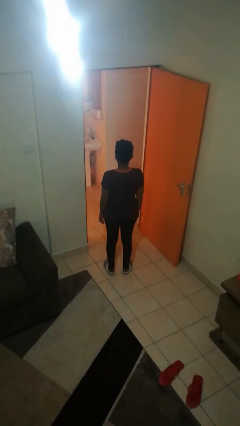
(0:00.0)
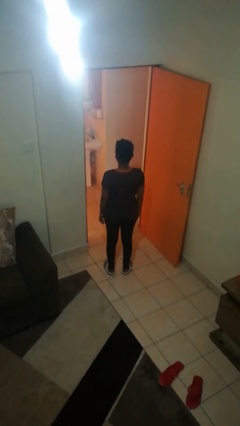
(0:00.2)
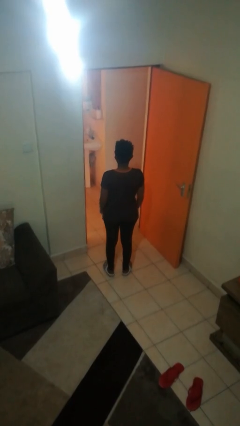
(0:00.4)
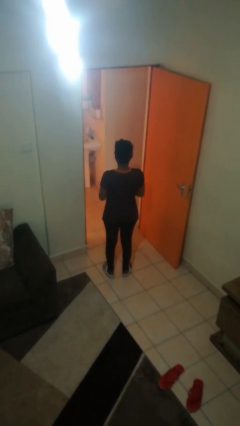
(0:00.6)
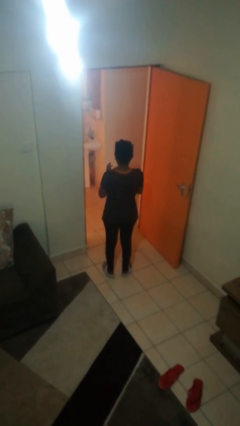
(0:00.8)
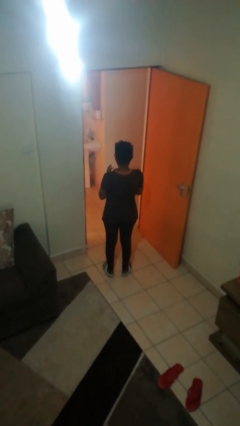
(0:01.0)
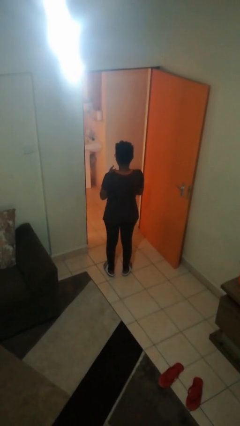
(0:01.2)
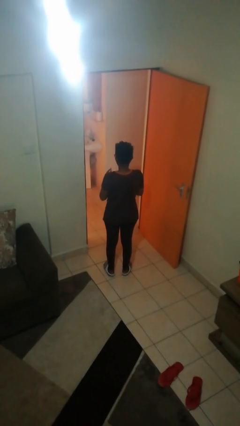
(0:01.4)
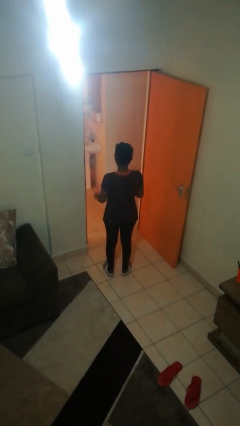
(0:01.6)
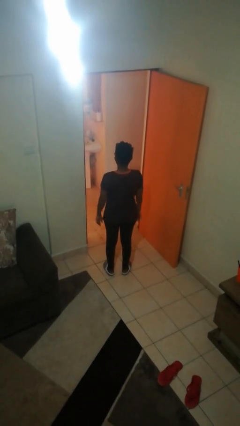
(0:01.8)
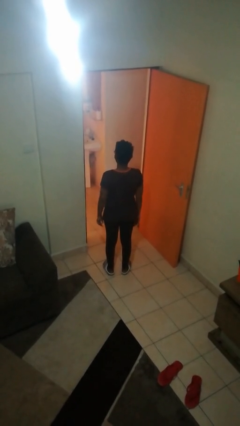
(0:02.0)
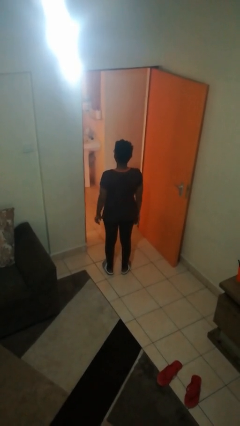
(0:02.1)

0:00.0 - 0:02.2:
person puts on ring

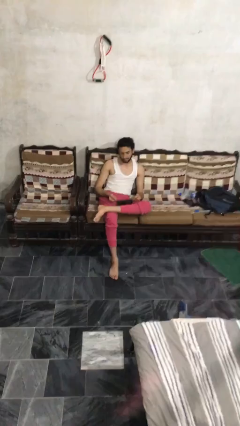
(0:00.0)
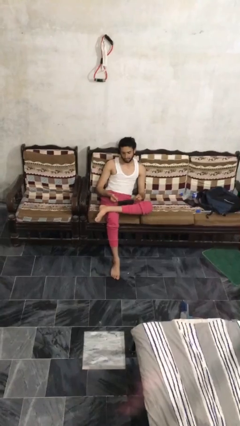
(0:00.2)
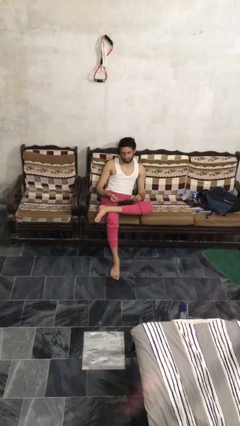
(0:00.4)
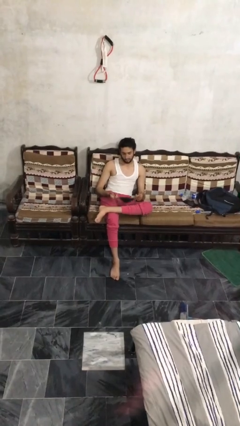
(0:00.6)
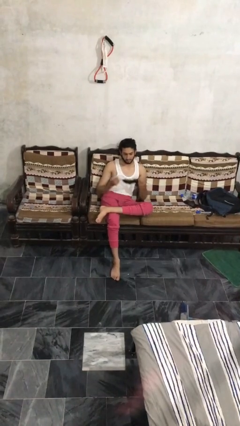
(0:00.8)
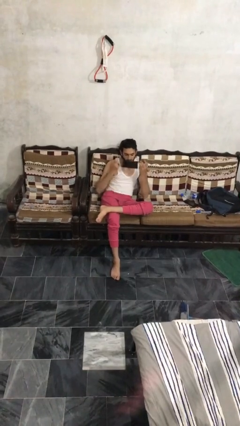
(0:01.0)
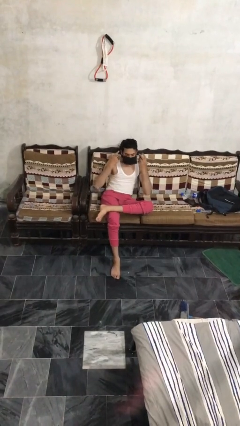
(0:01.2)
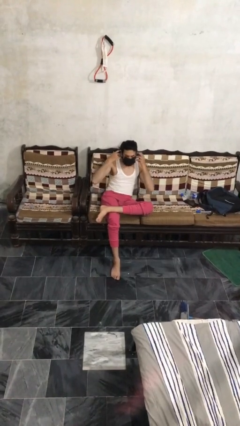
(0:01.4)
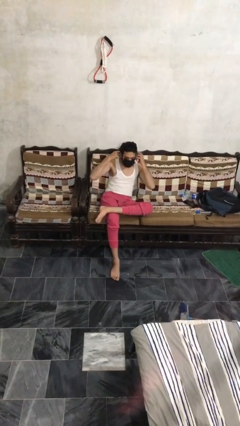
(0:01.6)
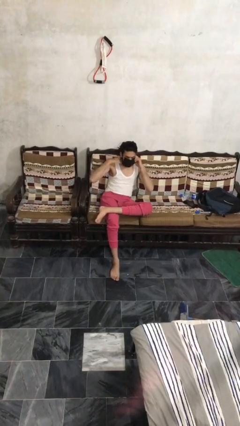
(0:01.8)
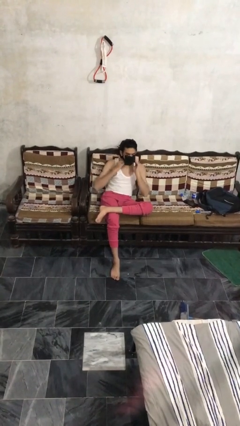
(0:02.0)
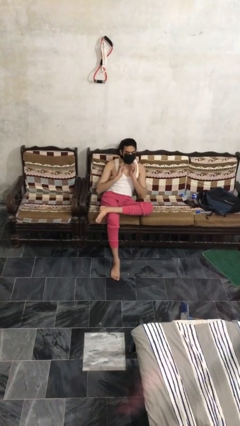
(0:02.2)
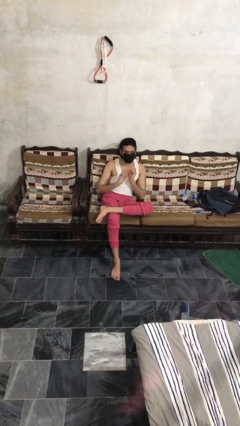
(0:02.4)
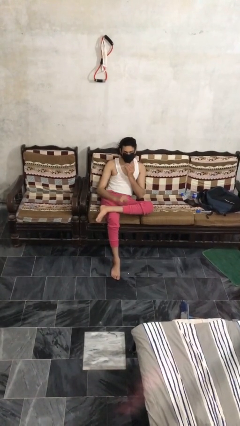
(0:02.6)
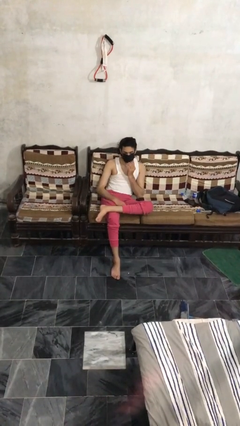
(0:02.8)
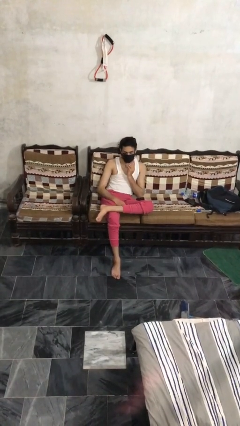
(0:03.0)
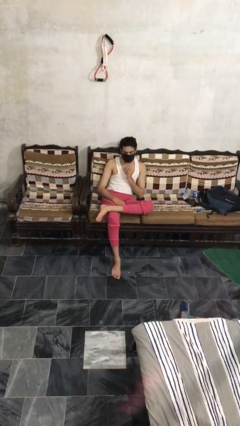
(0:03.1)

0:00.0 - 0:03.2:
person puts on facemask

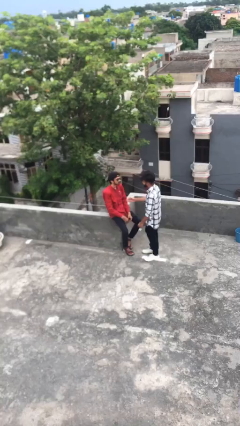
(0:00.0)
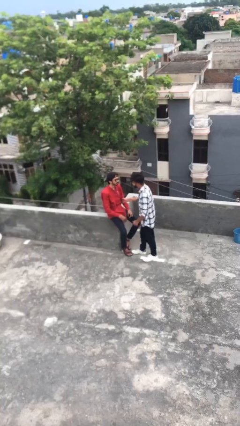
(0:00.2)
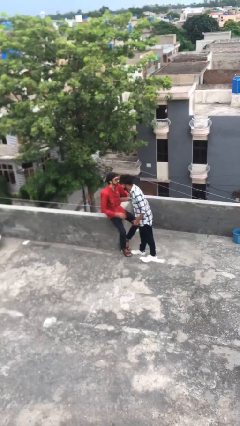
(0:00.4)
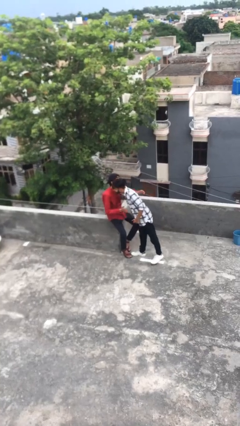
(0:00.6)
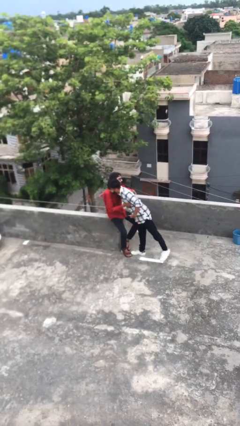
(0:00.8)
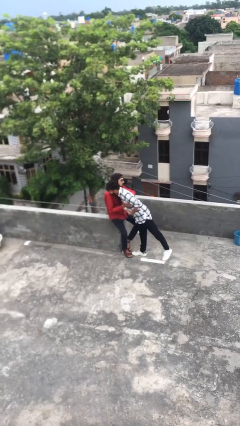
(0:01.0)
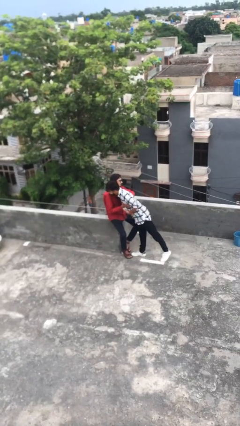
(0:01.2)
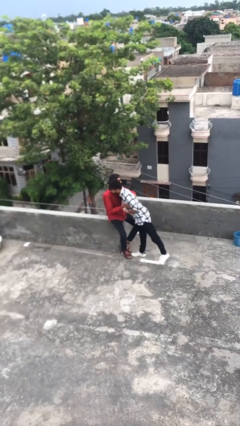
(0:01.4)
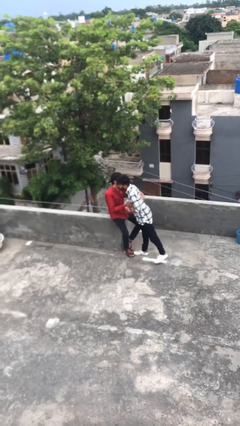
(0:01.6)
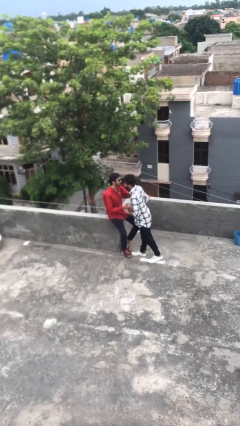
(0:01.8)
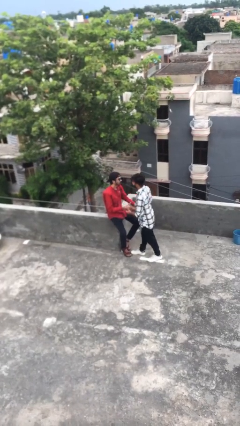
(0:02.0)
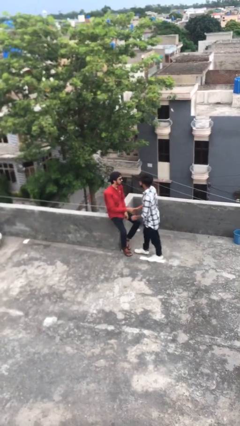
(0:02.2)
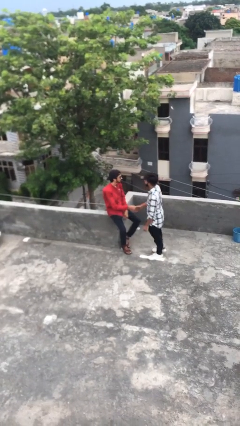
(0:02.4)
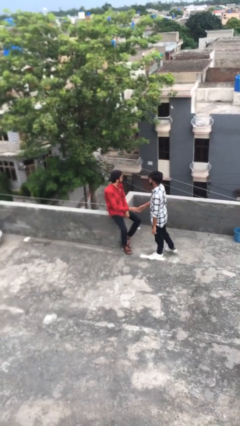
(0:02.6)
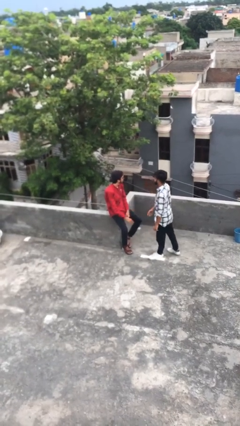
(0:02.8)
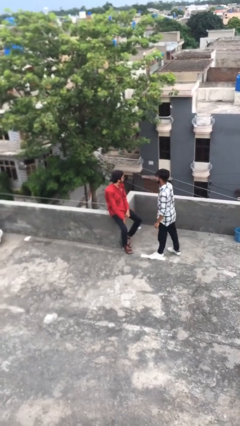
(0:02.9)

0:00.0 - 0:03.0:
person embraces person

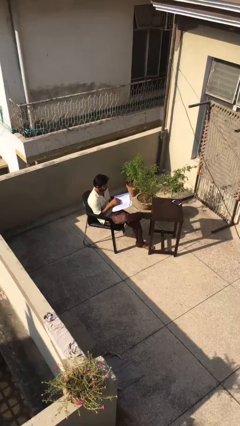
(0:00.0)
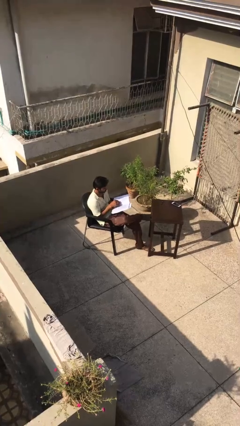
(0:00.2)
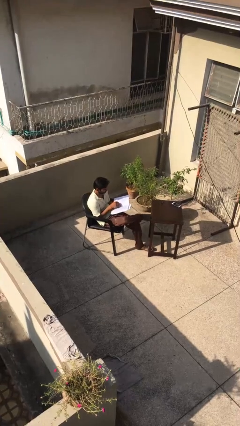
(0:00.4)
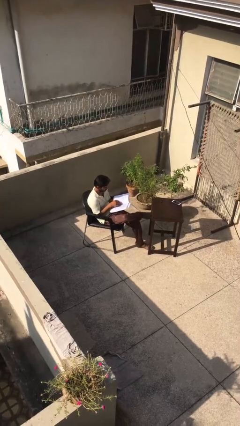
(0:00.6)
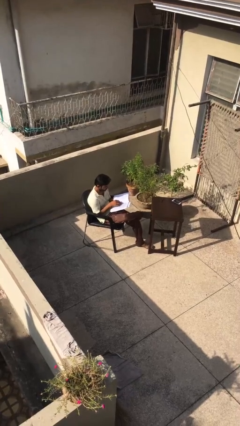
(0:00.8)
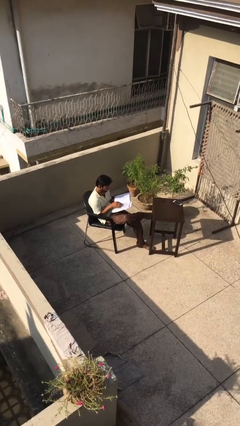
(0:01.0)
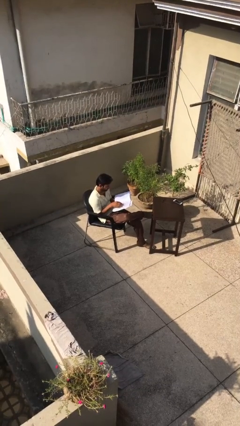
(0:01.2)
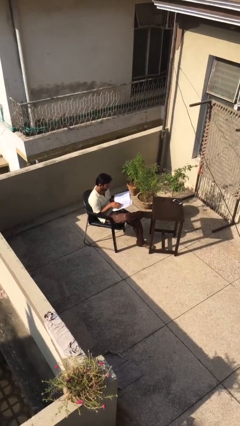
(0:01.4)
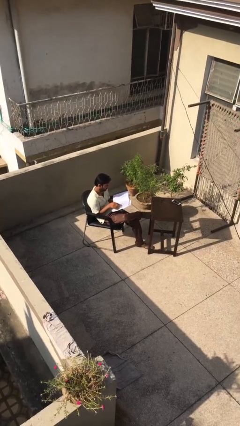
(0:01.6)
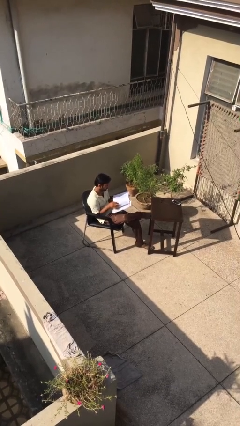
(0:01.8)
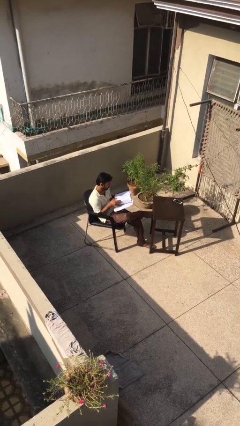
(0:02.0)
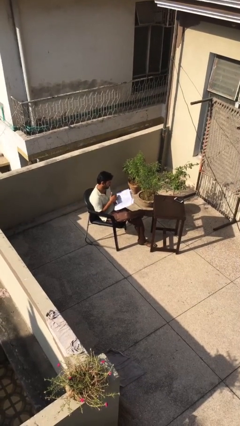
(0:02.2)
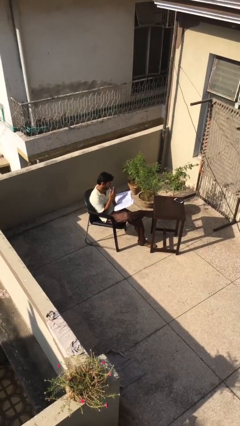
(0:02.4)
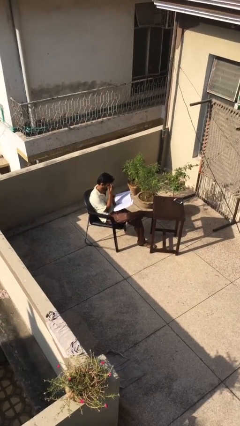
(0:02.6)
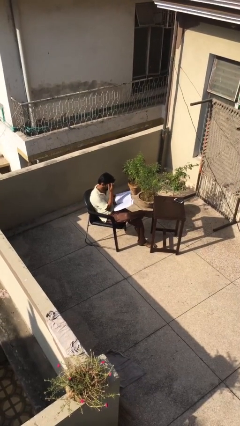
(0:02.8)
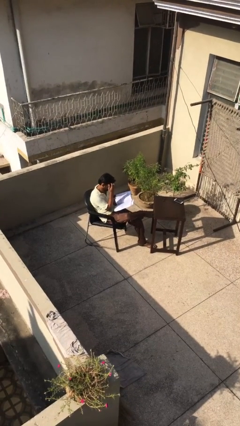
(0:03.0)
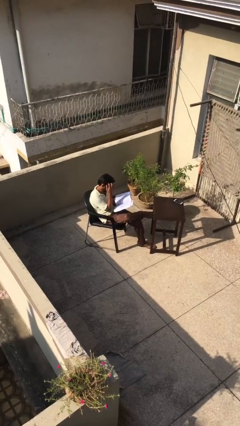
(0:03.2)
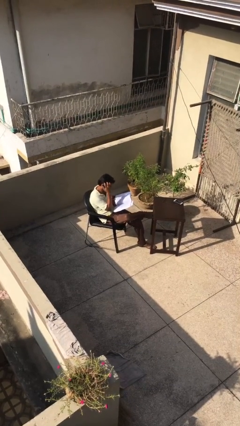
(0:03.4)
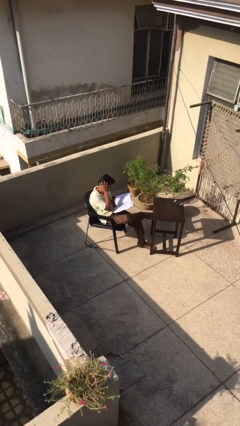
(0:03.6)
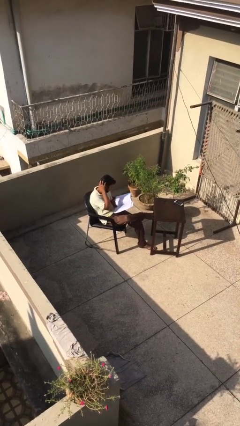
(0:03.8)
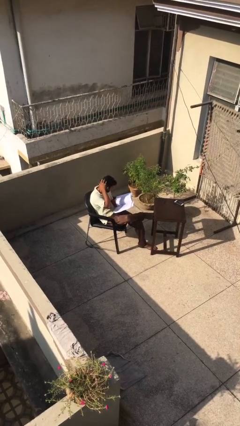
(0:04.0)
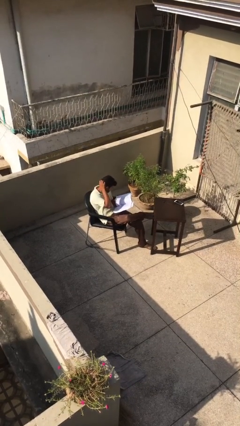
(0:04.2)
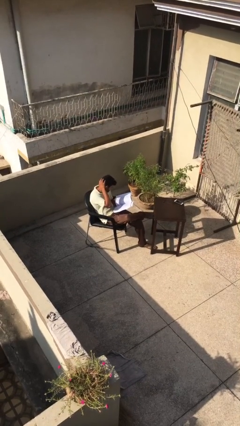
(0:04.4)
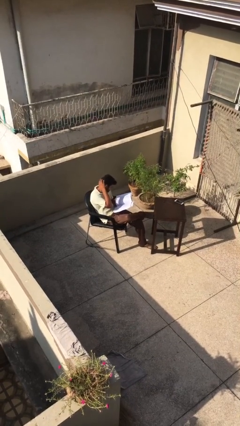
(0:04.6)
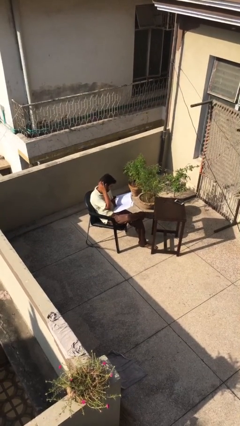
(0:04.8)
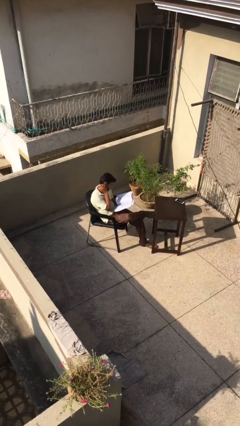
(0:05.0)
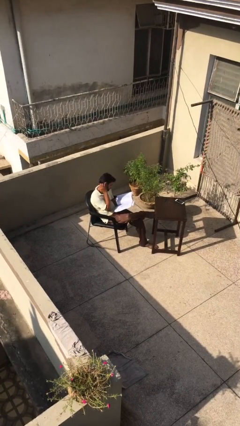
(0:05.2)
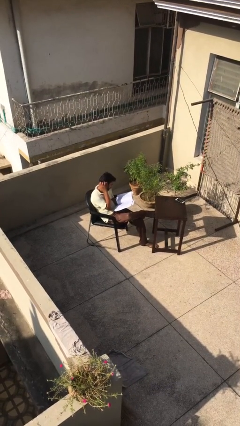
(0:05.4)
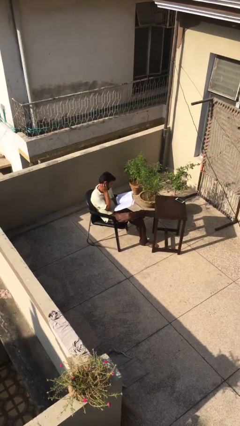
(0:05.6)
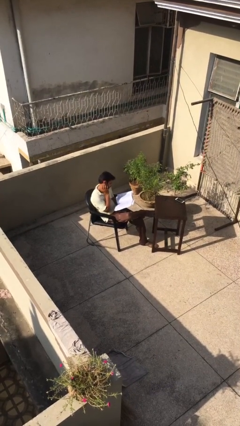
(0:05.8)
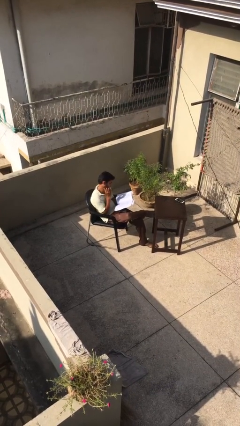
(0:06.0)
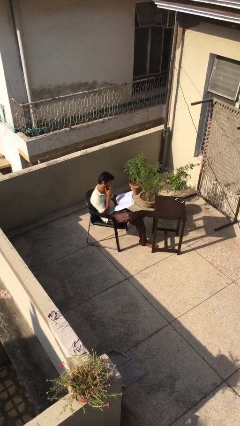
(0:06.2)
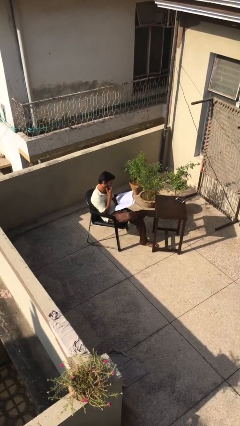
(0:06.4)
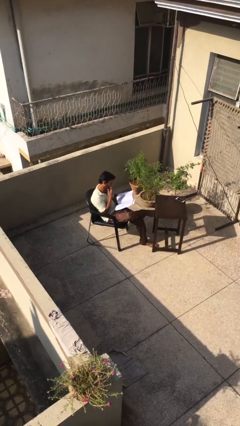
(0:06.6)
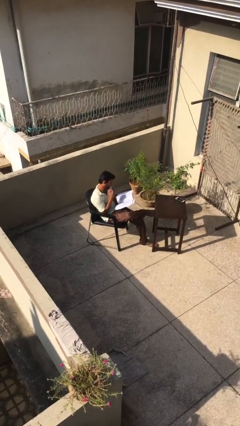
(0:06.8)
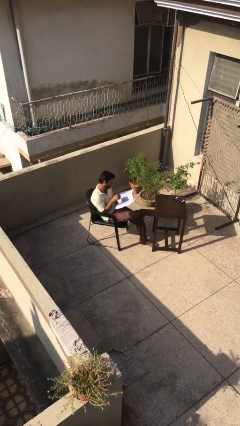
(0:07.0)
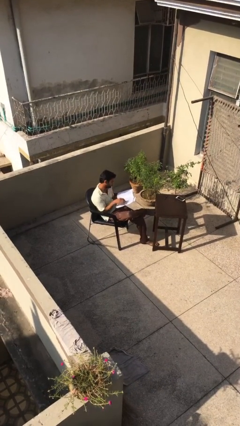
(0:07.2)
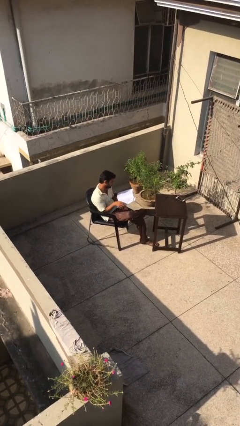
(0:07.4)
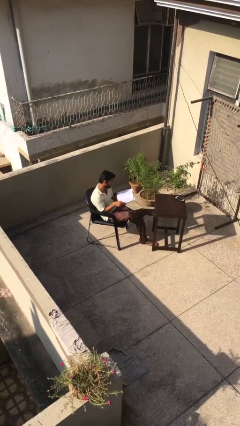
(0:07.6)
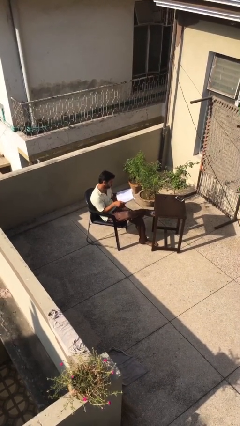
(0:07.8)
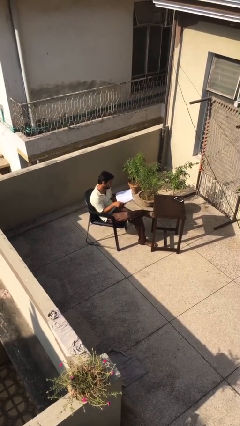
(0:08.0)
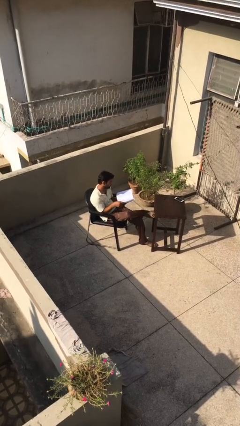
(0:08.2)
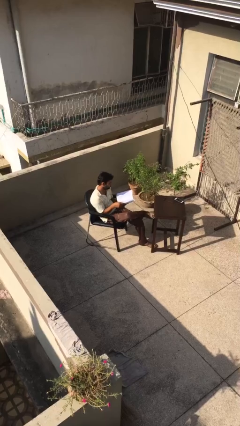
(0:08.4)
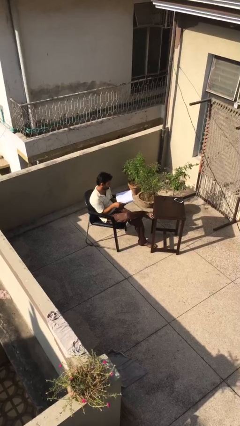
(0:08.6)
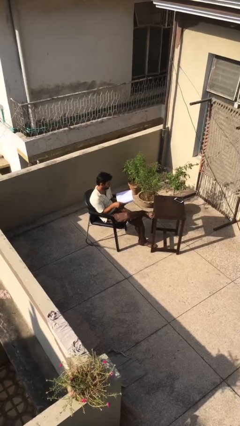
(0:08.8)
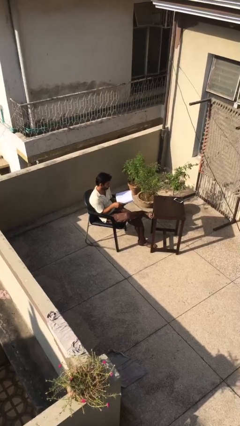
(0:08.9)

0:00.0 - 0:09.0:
person reads document

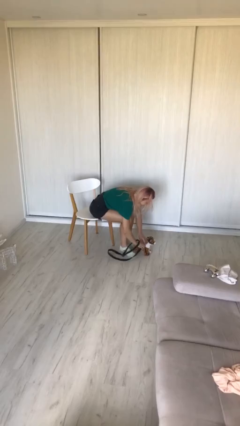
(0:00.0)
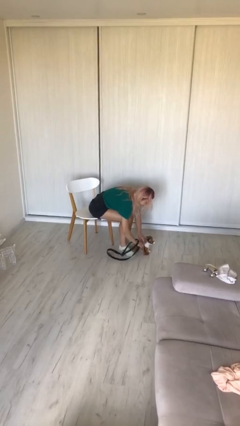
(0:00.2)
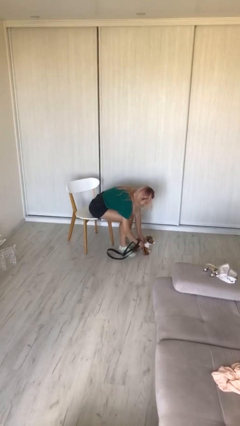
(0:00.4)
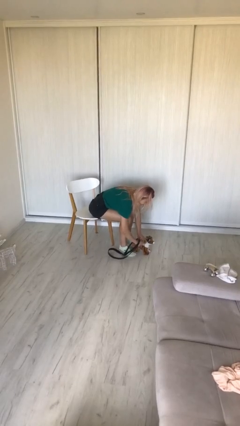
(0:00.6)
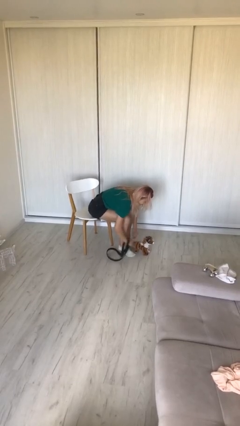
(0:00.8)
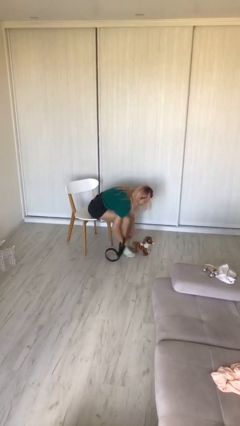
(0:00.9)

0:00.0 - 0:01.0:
person unattaches leash from dog
